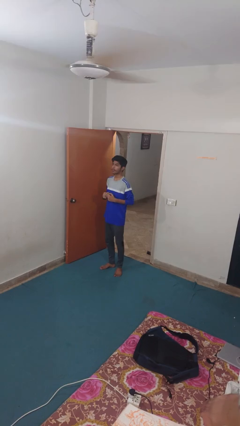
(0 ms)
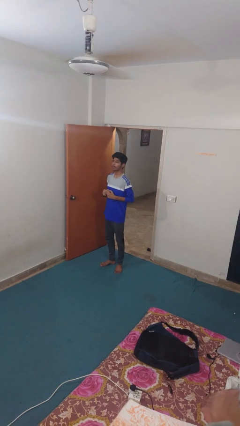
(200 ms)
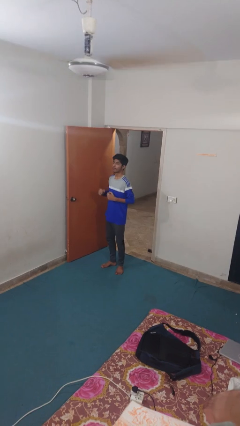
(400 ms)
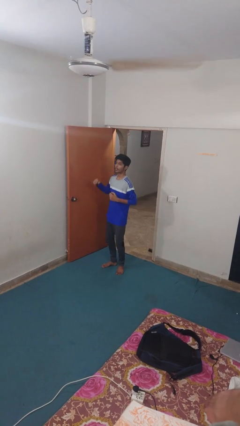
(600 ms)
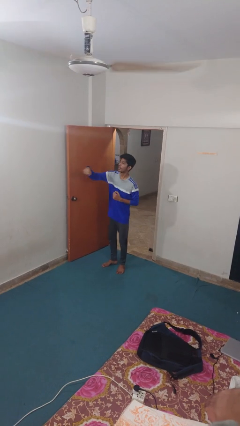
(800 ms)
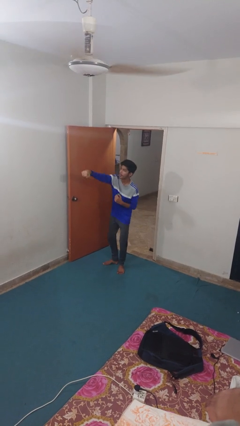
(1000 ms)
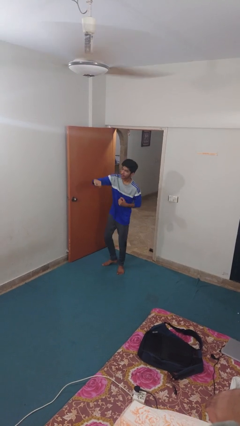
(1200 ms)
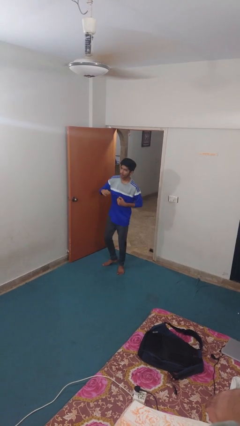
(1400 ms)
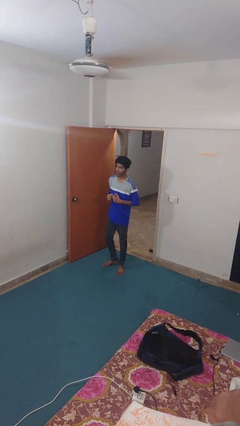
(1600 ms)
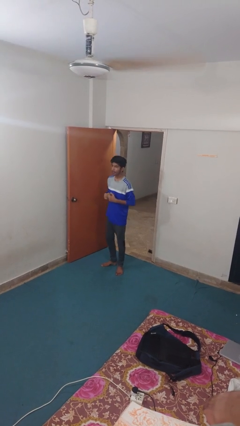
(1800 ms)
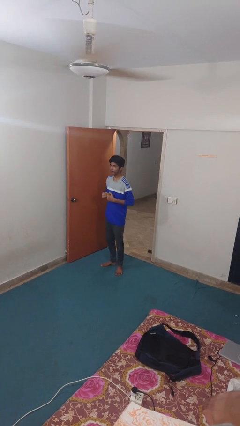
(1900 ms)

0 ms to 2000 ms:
person punches

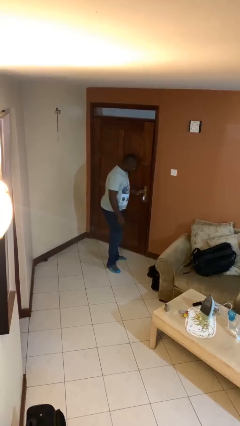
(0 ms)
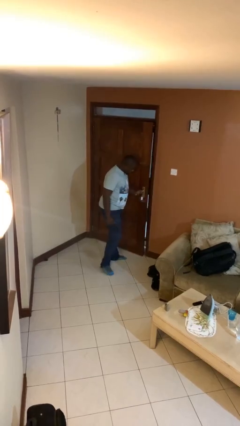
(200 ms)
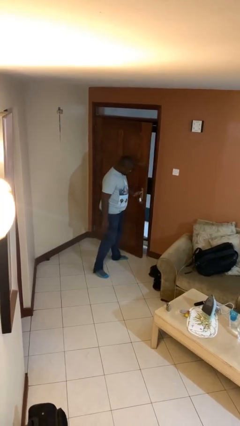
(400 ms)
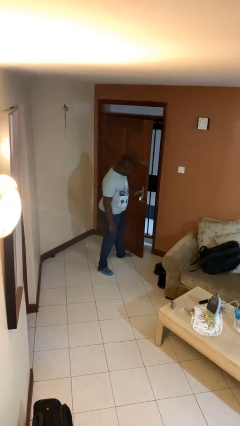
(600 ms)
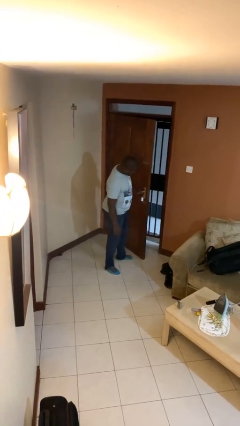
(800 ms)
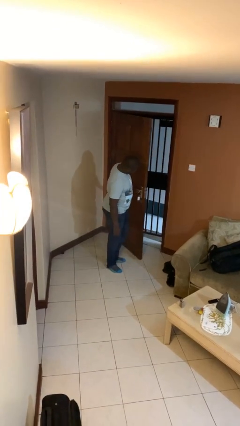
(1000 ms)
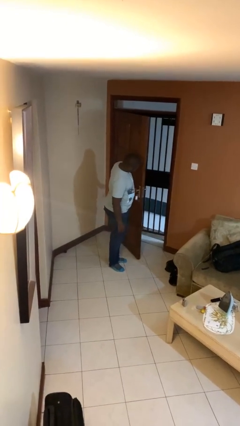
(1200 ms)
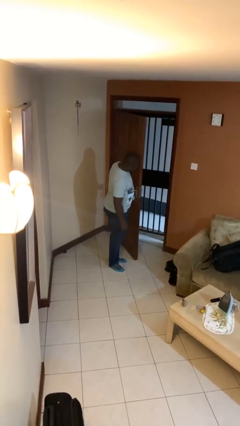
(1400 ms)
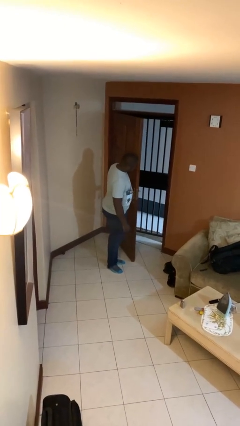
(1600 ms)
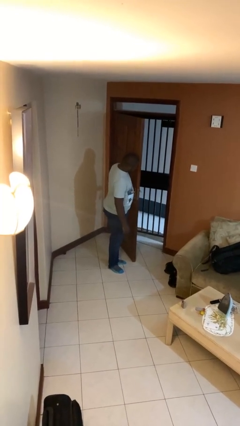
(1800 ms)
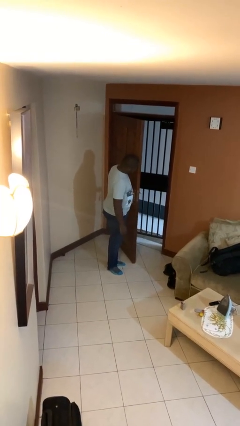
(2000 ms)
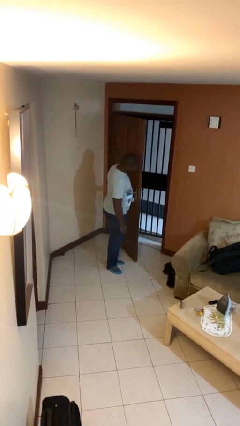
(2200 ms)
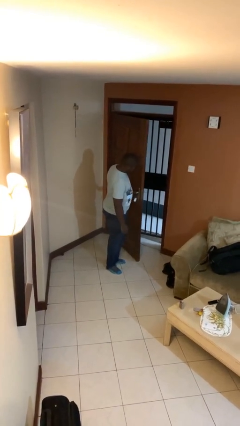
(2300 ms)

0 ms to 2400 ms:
person opens facility door

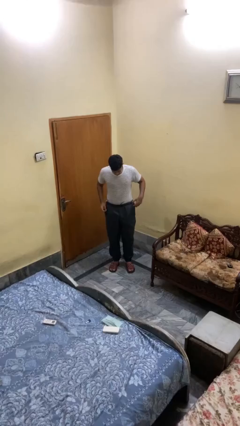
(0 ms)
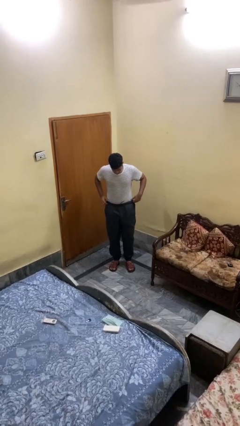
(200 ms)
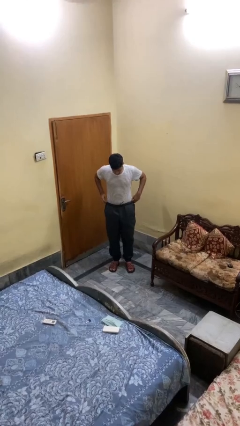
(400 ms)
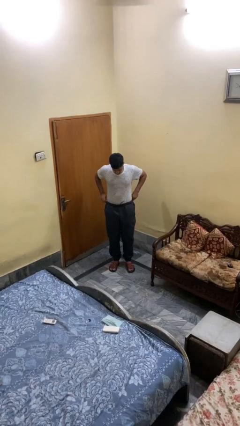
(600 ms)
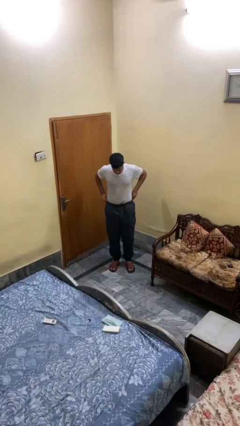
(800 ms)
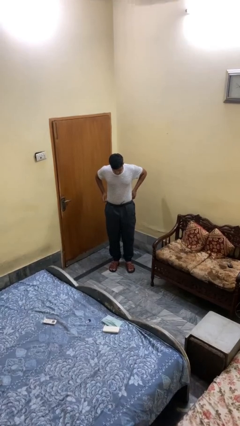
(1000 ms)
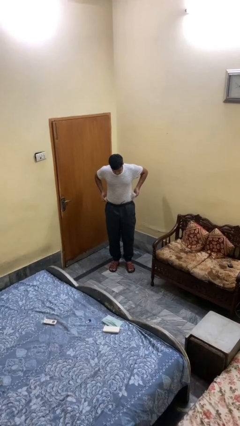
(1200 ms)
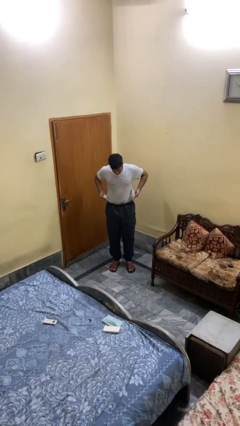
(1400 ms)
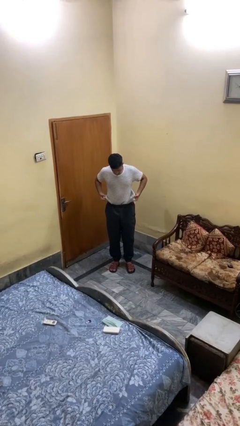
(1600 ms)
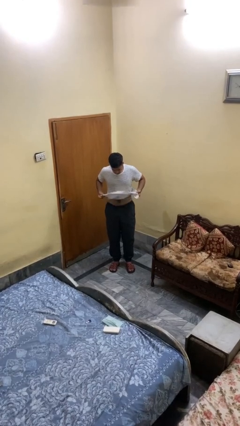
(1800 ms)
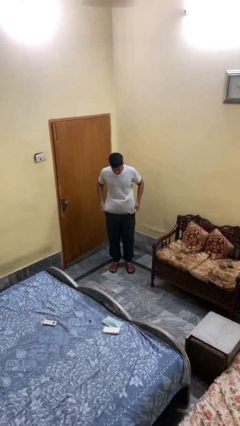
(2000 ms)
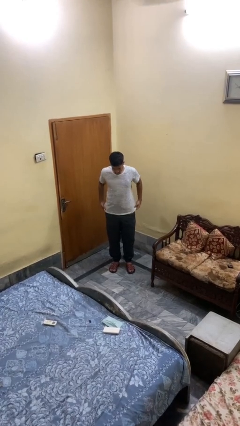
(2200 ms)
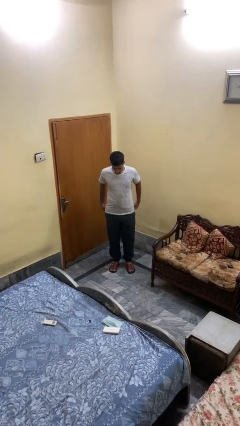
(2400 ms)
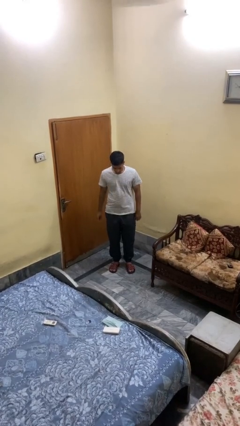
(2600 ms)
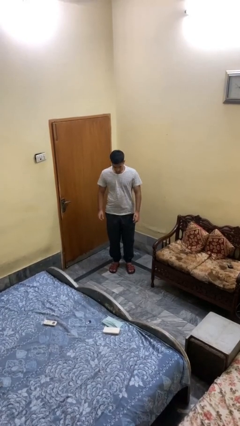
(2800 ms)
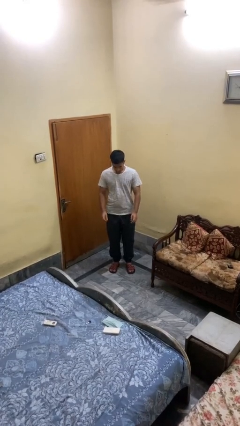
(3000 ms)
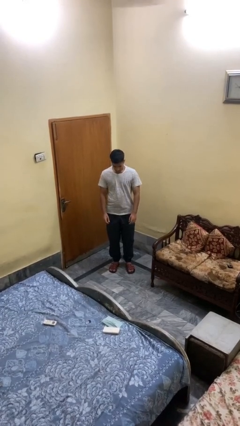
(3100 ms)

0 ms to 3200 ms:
person untucks shirt

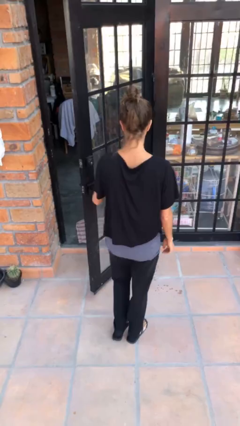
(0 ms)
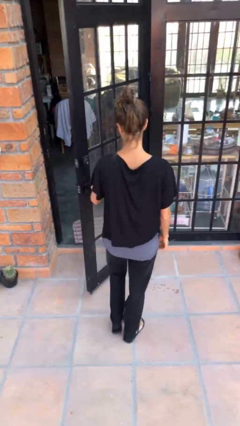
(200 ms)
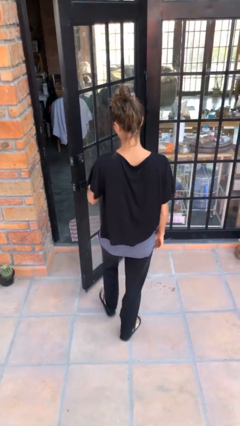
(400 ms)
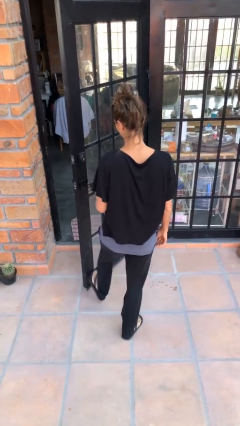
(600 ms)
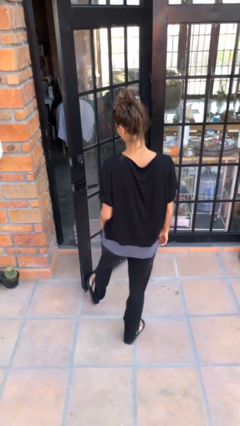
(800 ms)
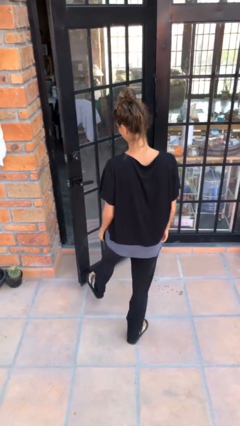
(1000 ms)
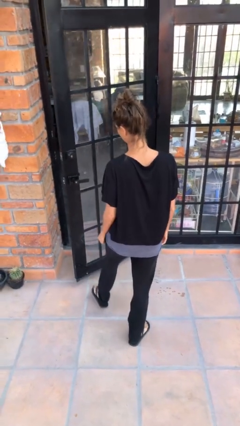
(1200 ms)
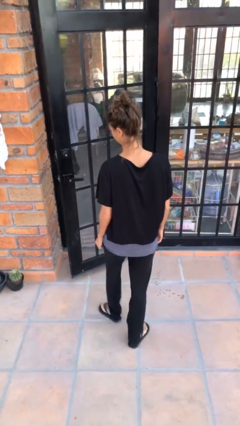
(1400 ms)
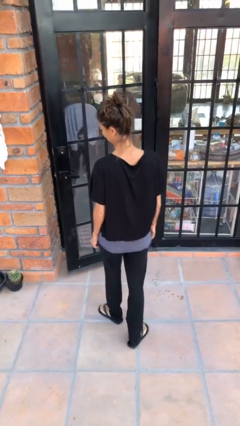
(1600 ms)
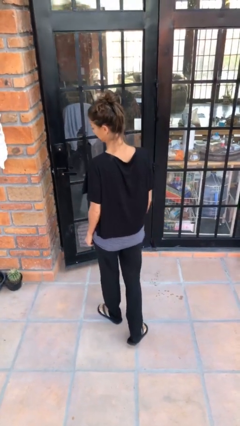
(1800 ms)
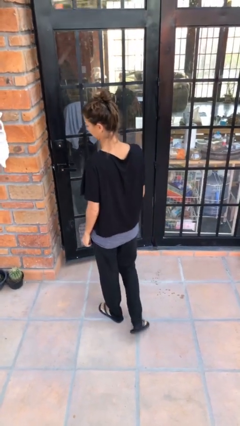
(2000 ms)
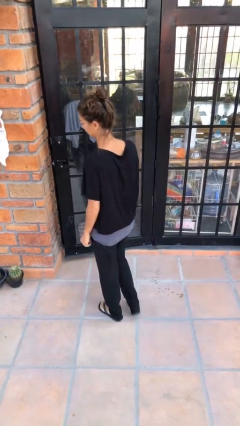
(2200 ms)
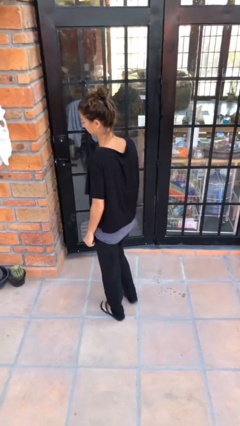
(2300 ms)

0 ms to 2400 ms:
person closes door with foot

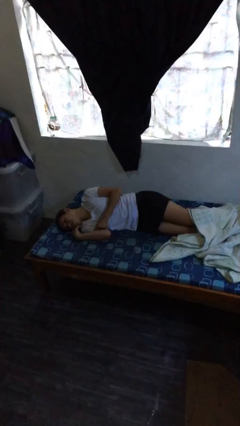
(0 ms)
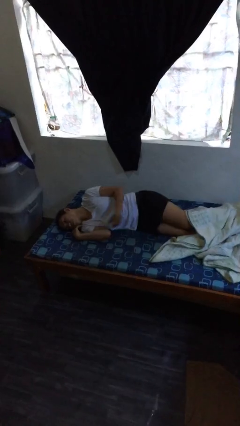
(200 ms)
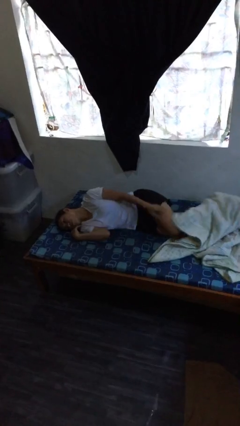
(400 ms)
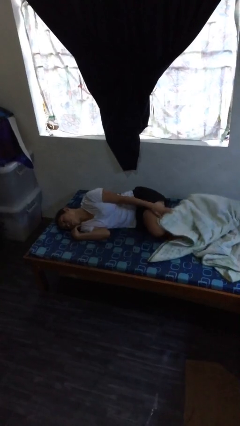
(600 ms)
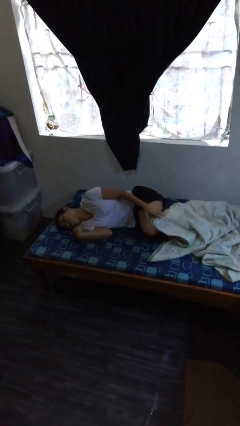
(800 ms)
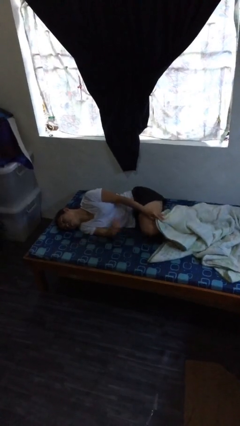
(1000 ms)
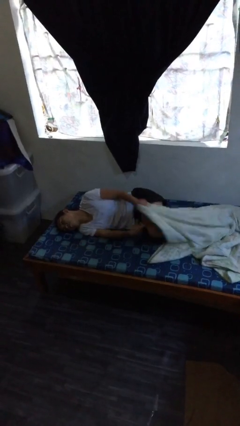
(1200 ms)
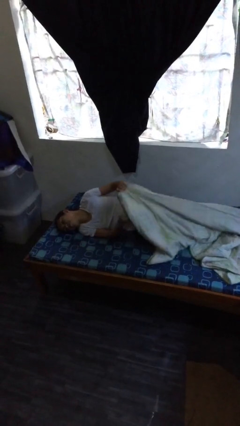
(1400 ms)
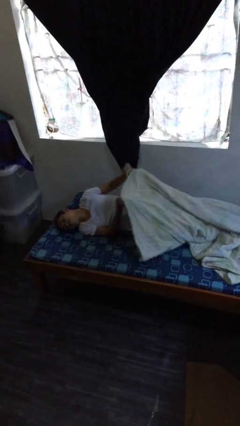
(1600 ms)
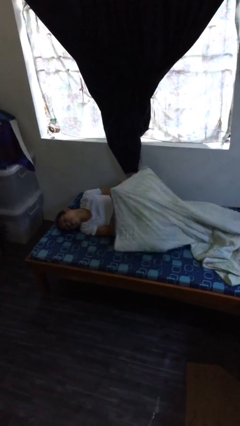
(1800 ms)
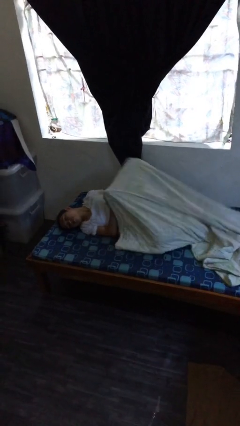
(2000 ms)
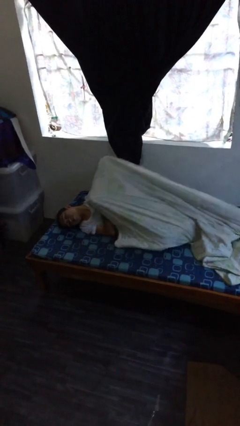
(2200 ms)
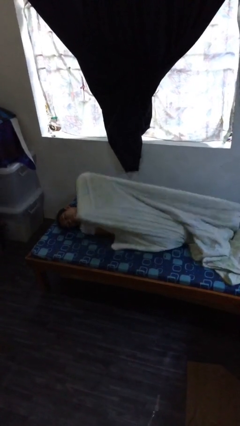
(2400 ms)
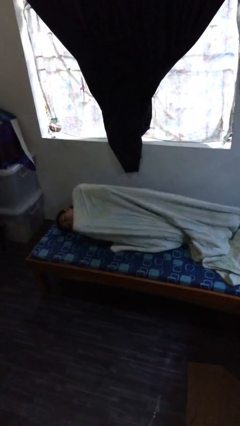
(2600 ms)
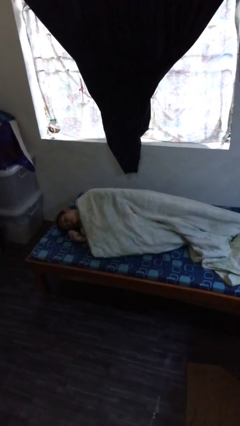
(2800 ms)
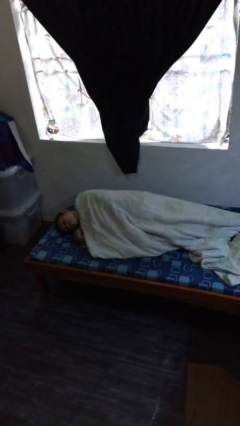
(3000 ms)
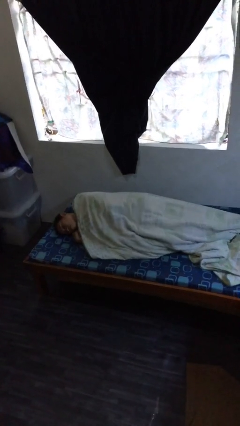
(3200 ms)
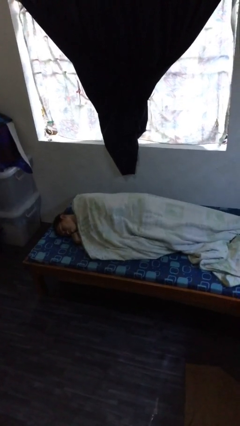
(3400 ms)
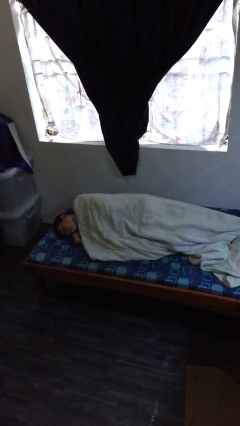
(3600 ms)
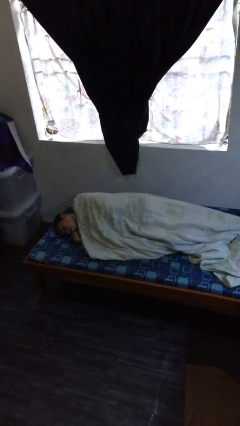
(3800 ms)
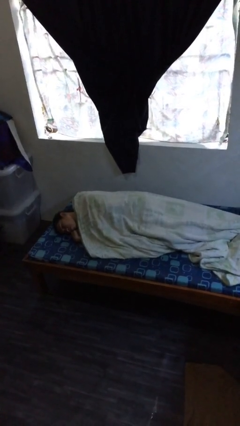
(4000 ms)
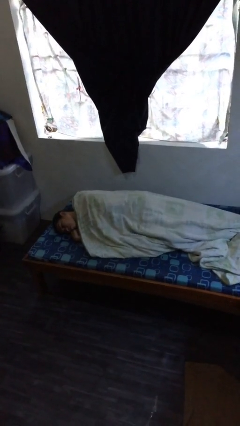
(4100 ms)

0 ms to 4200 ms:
person covers with bedsheets

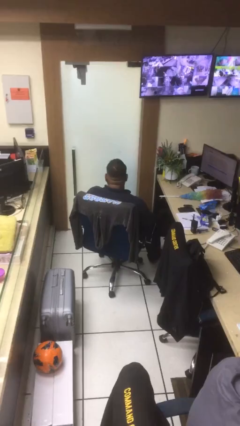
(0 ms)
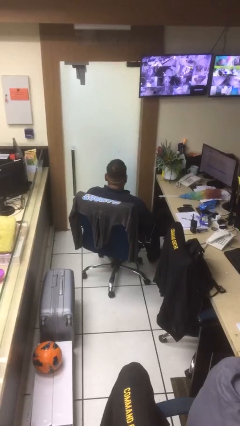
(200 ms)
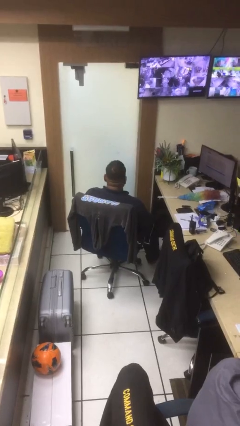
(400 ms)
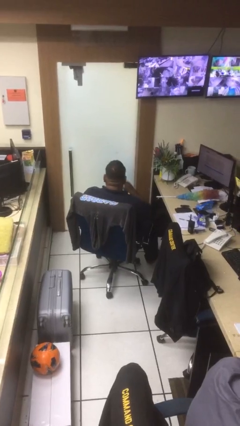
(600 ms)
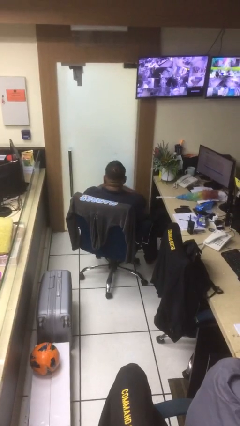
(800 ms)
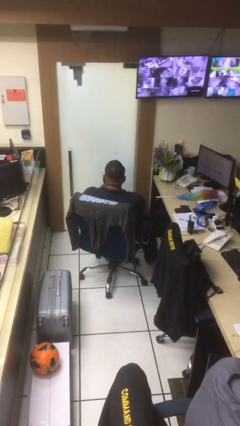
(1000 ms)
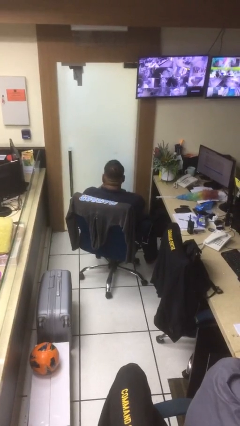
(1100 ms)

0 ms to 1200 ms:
person swats bug

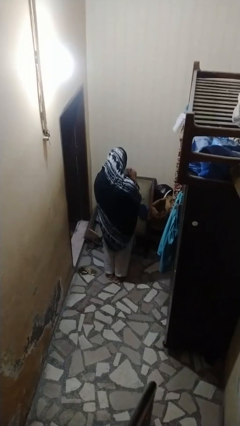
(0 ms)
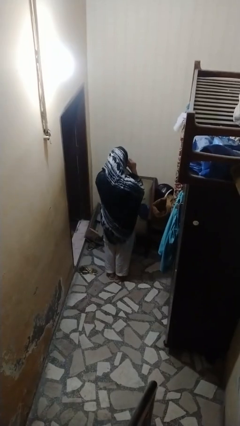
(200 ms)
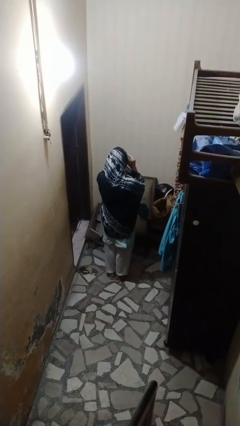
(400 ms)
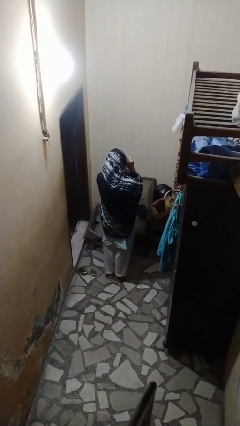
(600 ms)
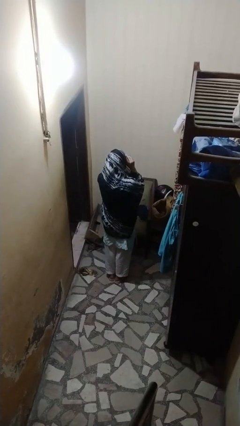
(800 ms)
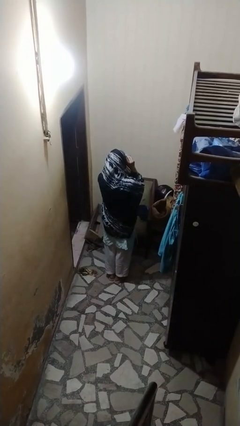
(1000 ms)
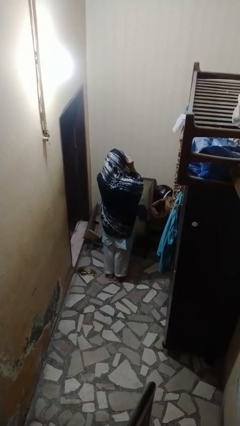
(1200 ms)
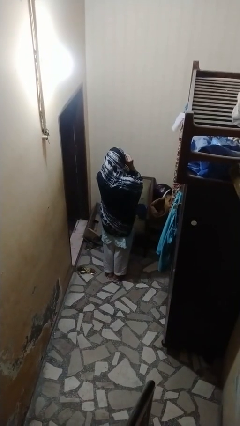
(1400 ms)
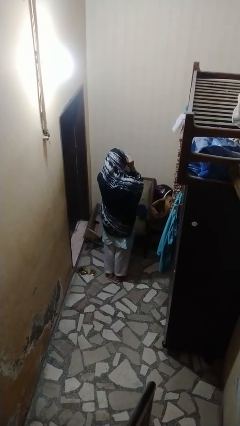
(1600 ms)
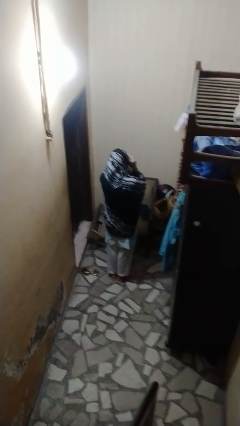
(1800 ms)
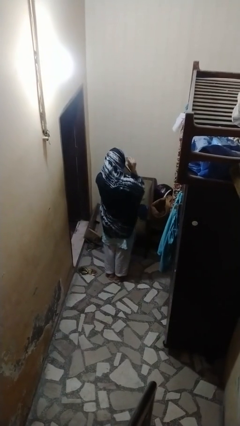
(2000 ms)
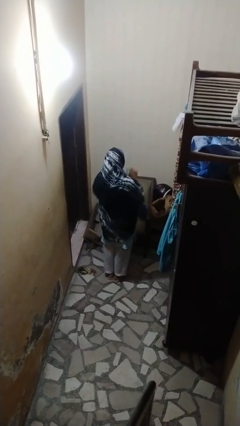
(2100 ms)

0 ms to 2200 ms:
person drinks from mug
